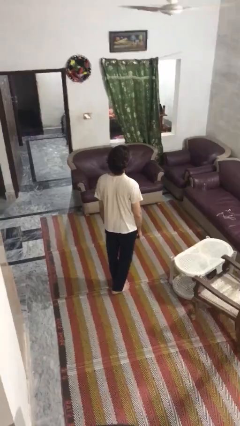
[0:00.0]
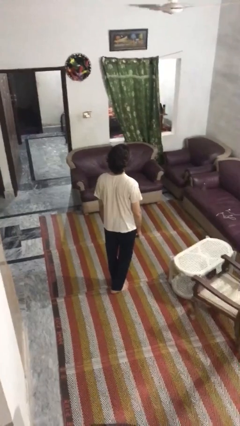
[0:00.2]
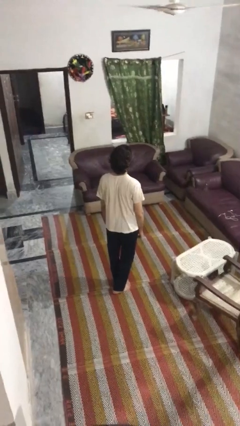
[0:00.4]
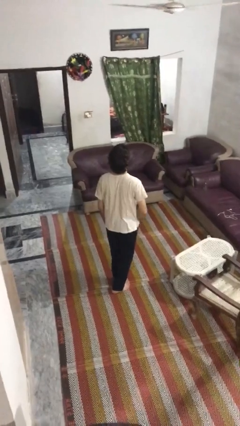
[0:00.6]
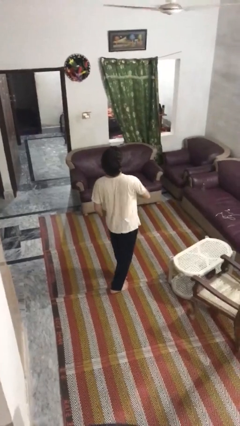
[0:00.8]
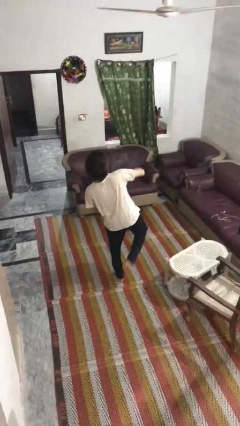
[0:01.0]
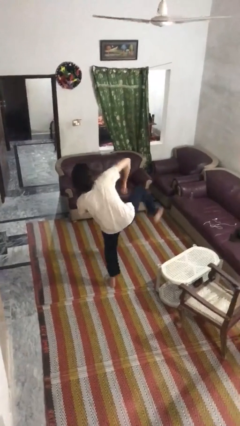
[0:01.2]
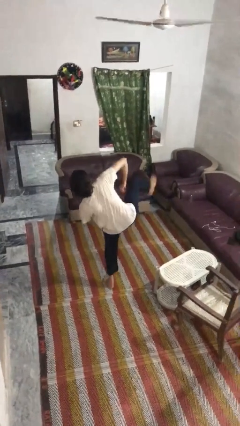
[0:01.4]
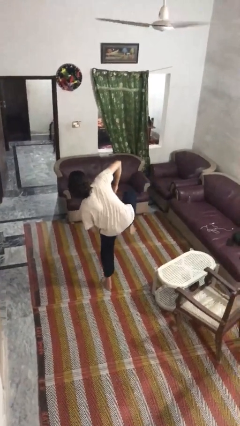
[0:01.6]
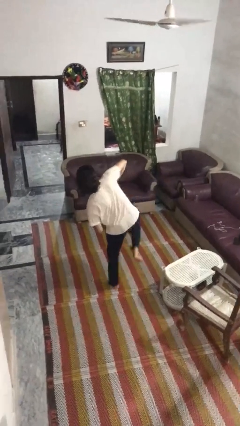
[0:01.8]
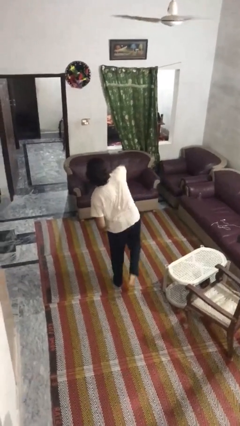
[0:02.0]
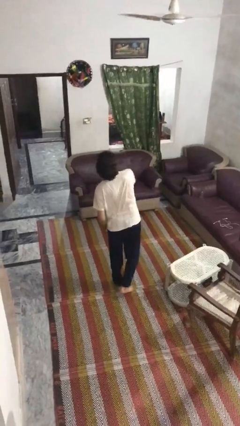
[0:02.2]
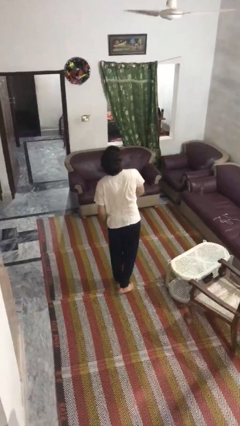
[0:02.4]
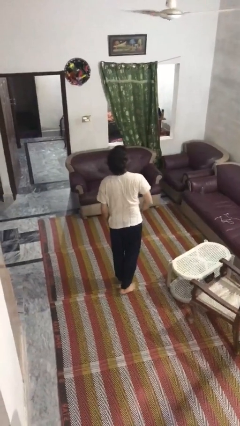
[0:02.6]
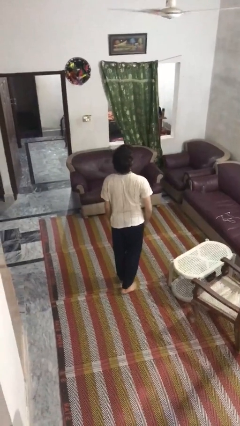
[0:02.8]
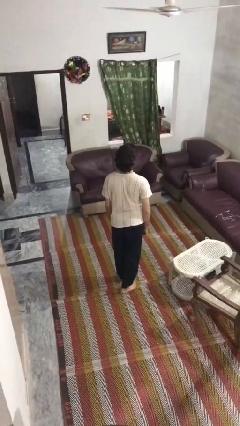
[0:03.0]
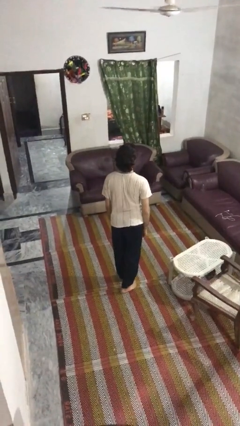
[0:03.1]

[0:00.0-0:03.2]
person karate kicks

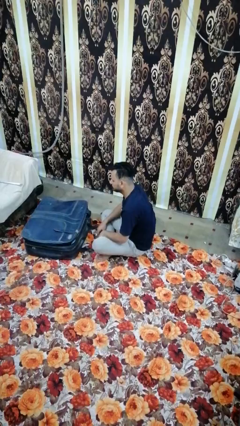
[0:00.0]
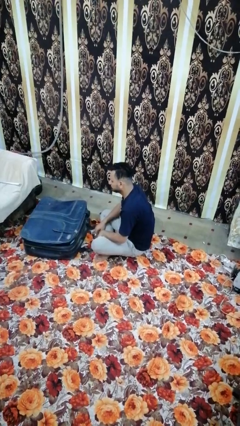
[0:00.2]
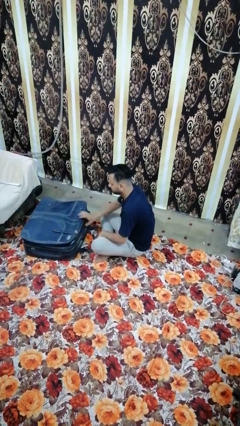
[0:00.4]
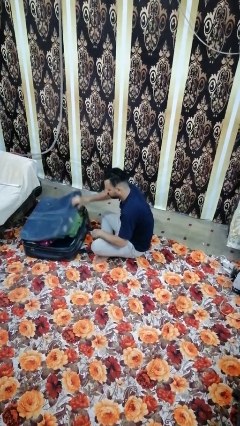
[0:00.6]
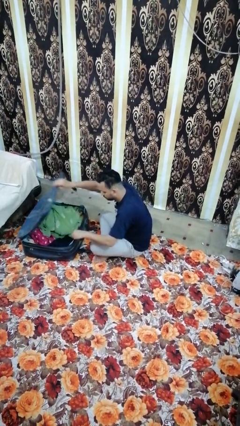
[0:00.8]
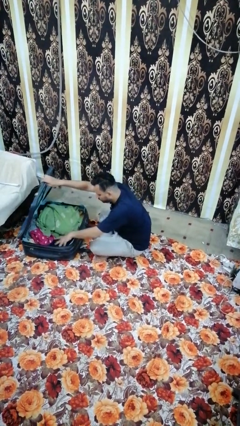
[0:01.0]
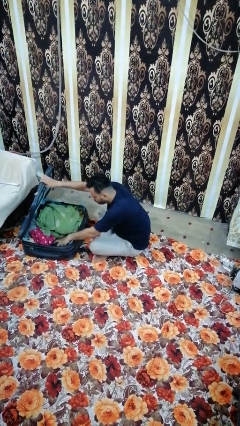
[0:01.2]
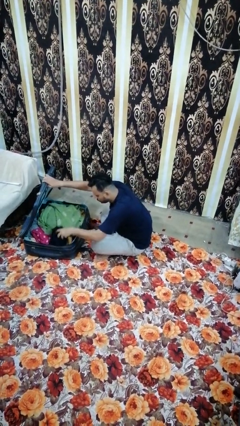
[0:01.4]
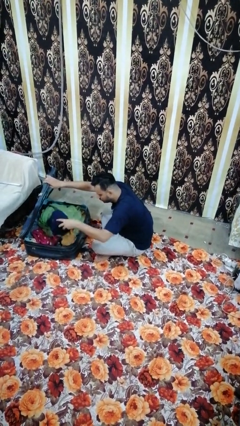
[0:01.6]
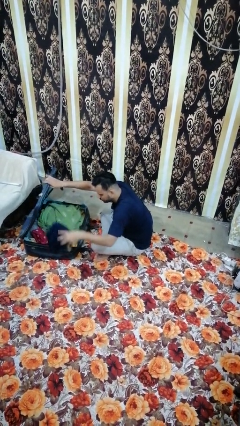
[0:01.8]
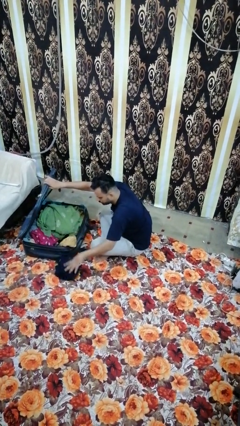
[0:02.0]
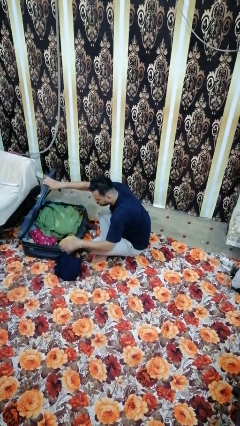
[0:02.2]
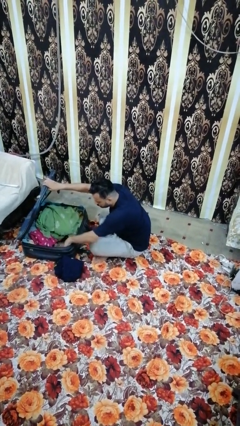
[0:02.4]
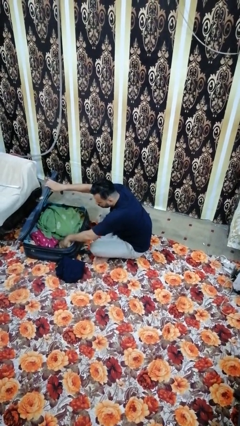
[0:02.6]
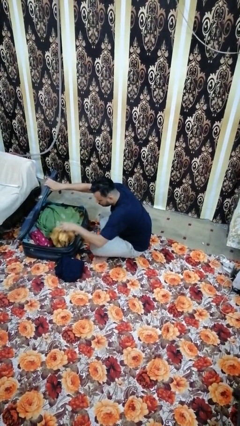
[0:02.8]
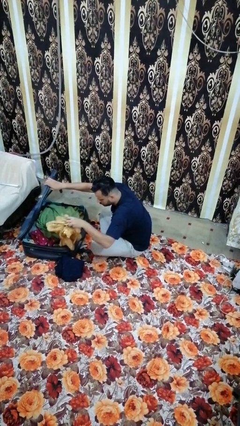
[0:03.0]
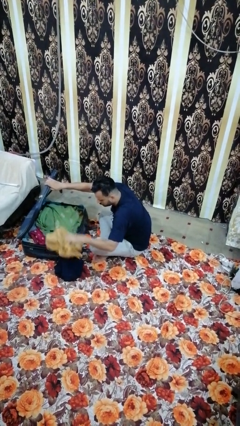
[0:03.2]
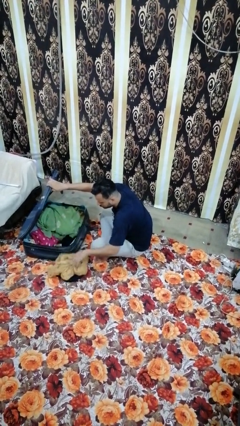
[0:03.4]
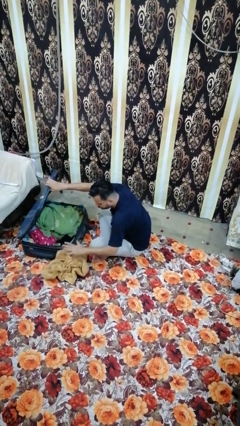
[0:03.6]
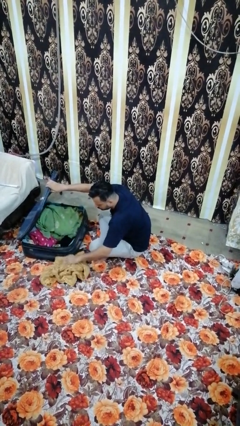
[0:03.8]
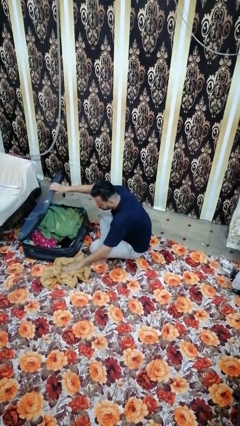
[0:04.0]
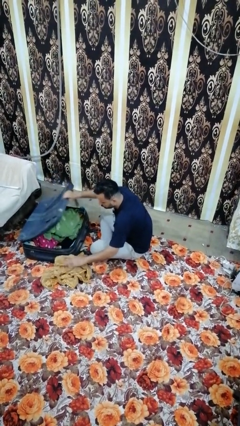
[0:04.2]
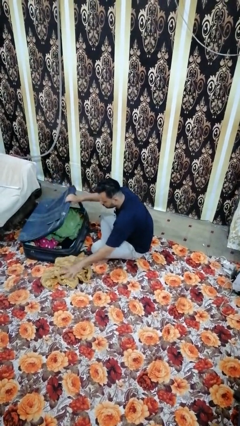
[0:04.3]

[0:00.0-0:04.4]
person unloads clothes from suitcase

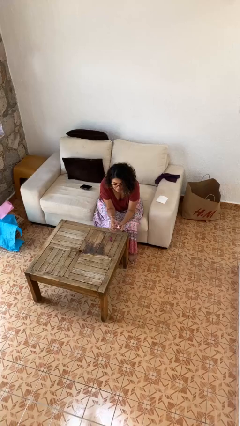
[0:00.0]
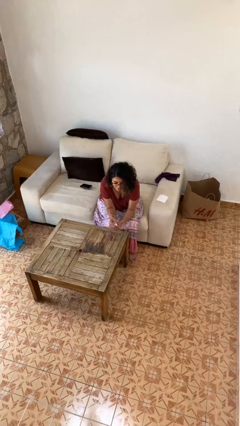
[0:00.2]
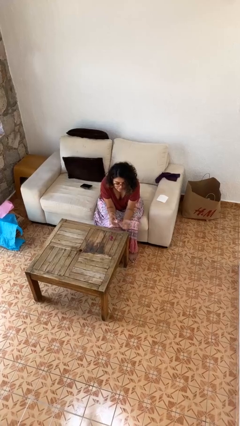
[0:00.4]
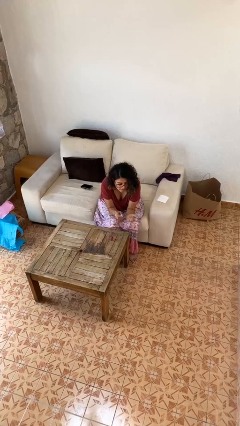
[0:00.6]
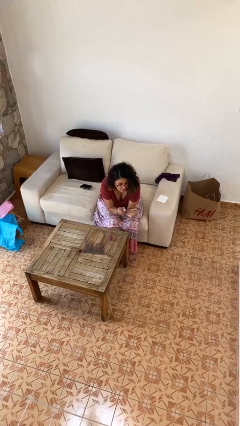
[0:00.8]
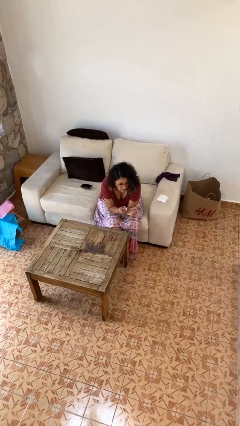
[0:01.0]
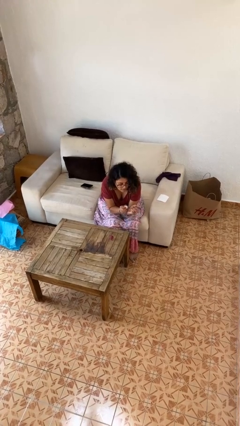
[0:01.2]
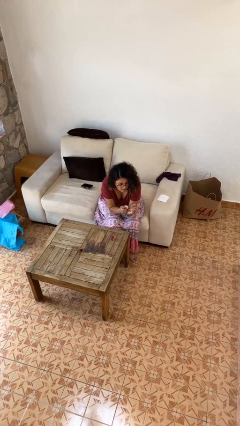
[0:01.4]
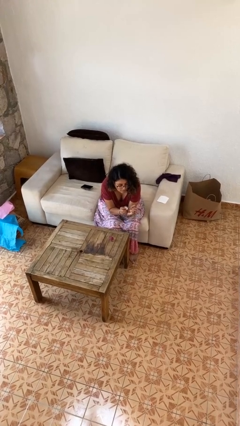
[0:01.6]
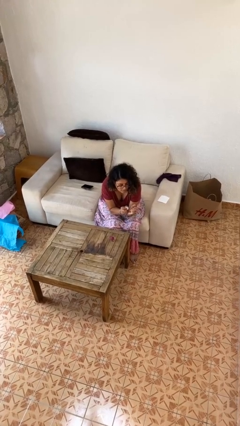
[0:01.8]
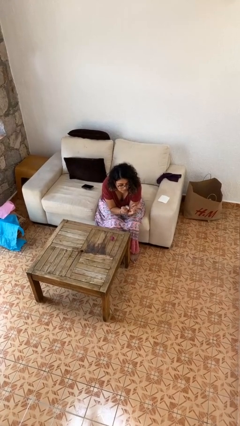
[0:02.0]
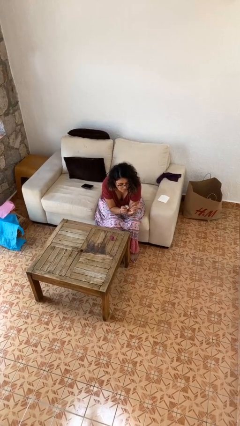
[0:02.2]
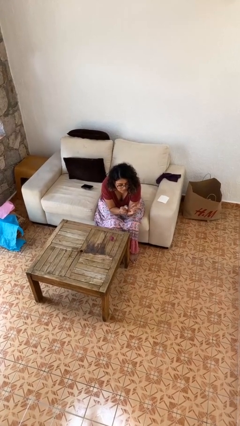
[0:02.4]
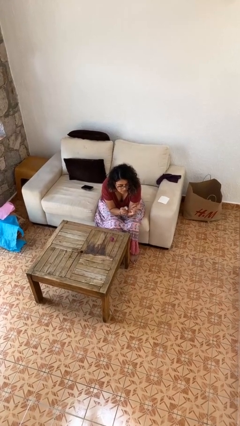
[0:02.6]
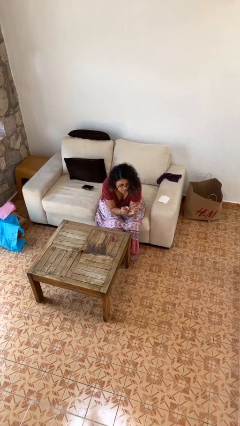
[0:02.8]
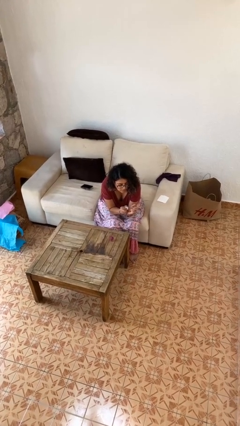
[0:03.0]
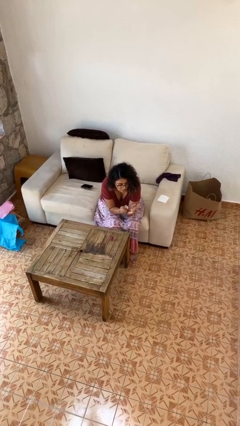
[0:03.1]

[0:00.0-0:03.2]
person paints fingernails

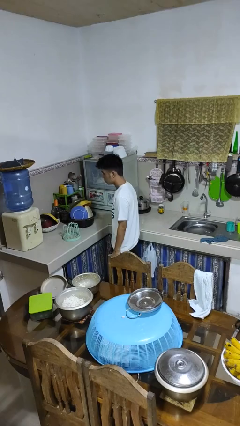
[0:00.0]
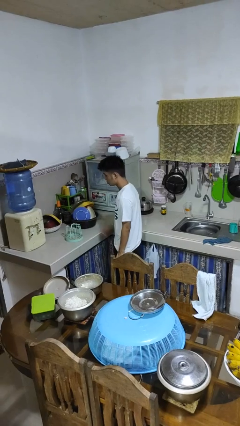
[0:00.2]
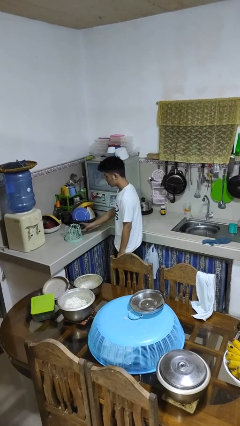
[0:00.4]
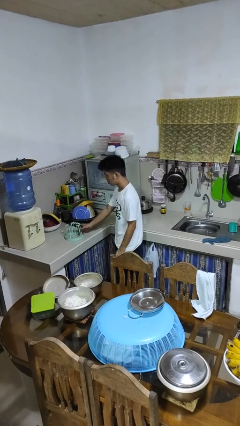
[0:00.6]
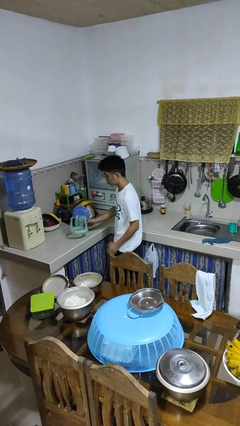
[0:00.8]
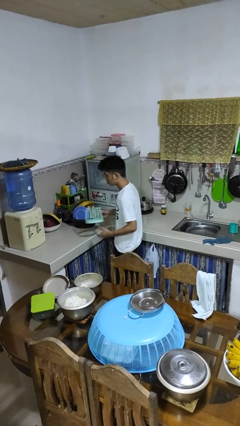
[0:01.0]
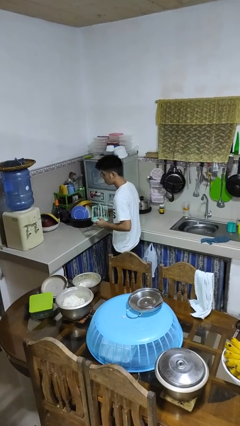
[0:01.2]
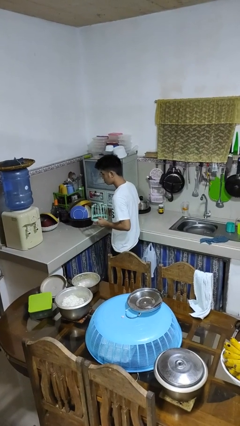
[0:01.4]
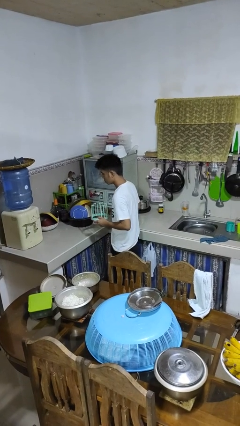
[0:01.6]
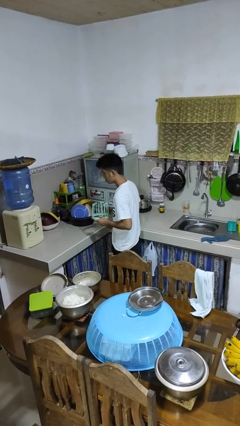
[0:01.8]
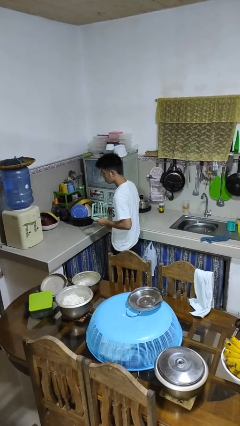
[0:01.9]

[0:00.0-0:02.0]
person picks up object from countertop

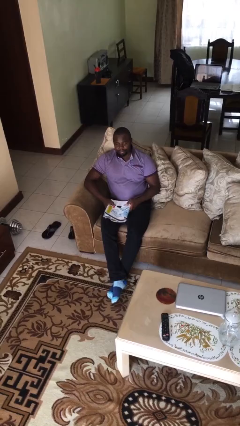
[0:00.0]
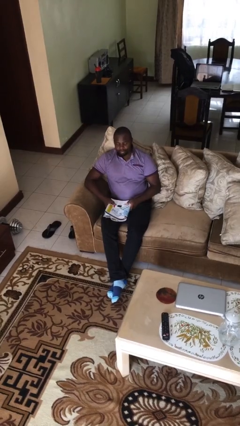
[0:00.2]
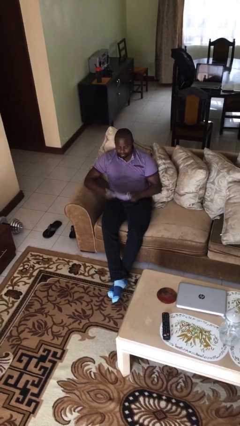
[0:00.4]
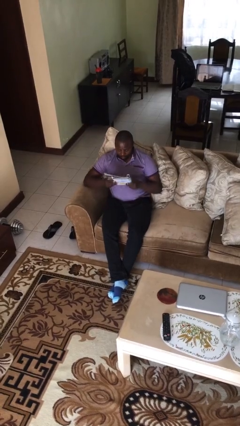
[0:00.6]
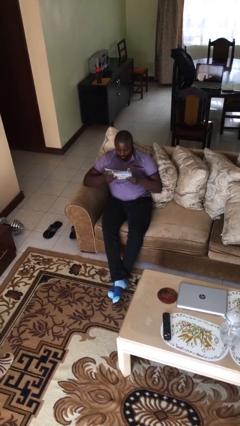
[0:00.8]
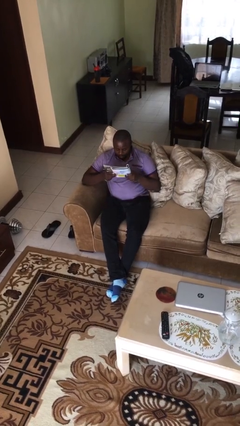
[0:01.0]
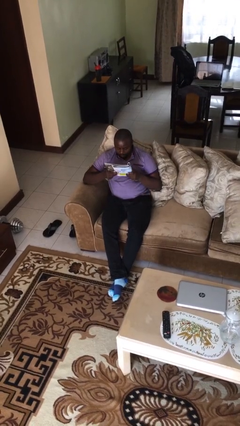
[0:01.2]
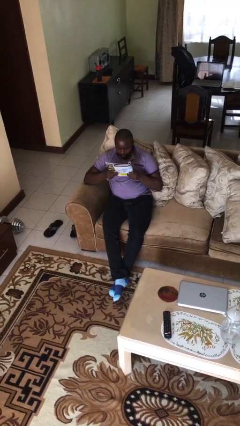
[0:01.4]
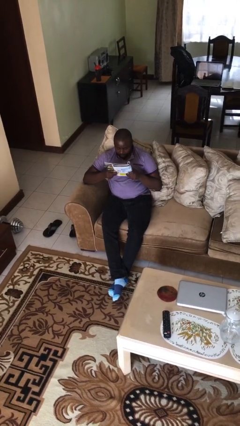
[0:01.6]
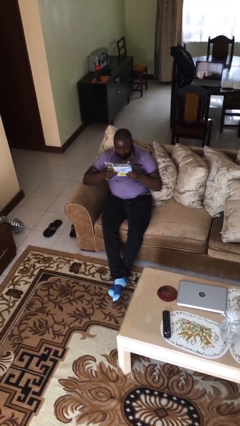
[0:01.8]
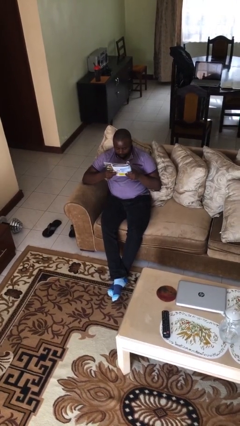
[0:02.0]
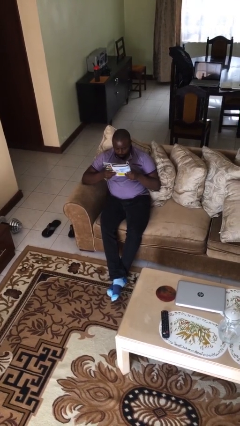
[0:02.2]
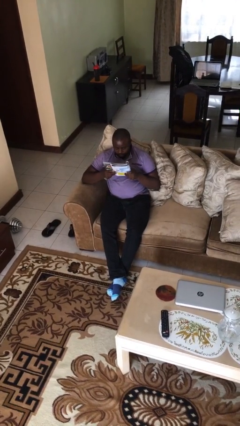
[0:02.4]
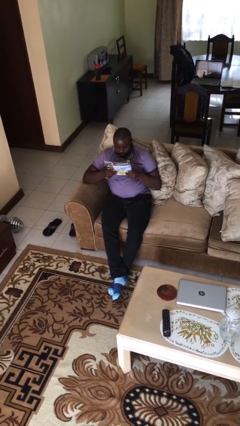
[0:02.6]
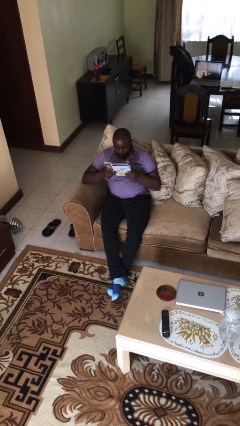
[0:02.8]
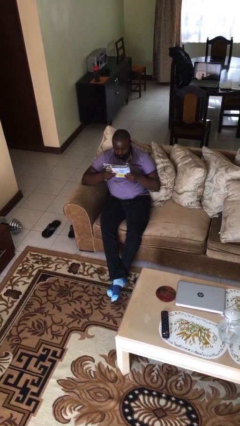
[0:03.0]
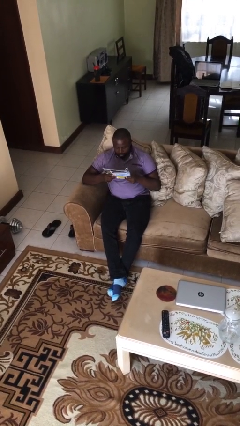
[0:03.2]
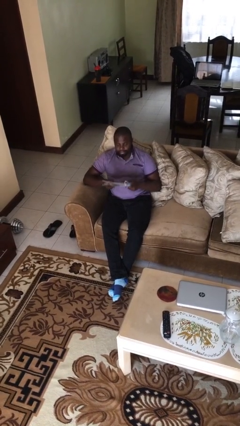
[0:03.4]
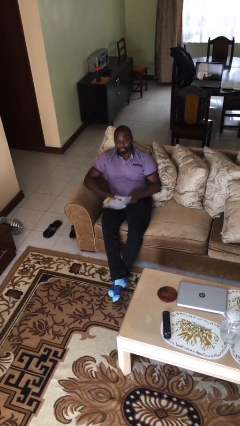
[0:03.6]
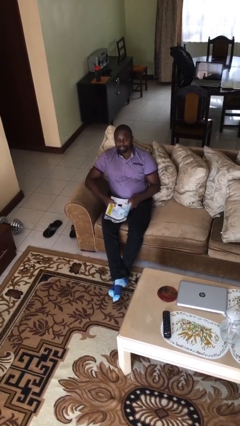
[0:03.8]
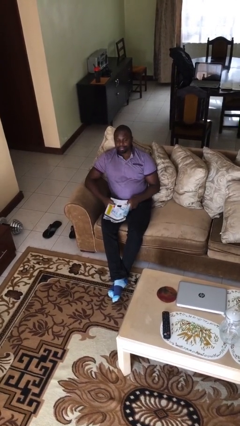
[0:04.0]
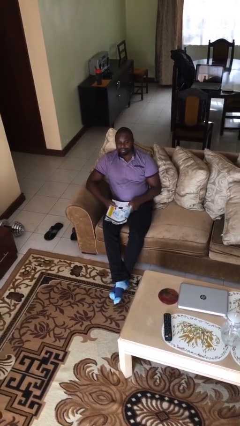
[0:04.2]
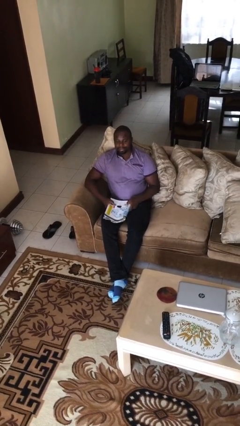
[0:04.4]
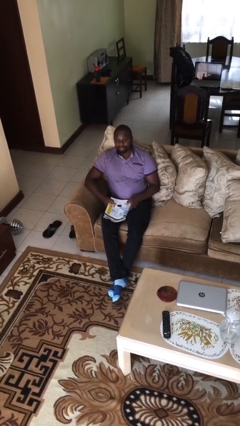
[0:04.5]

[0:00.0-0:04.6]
person reads document
